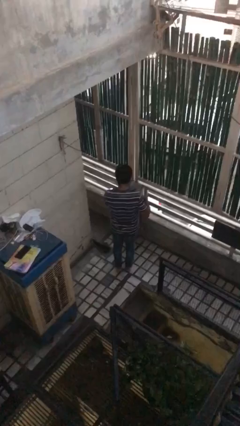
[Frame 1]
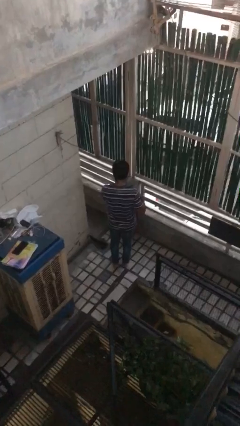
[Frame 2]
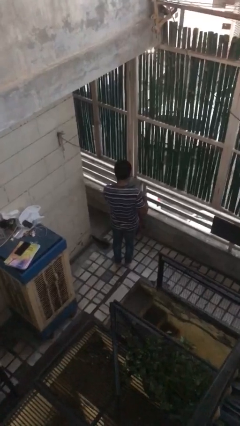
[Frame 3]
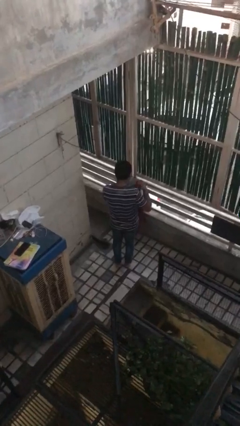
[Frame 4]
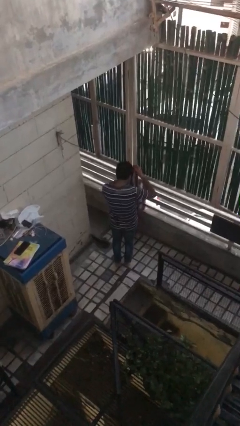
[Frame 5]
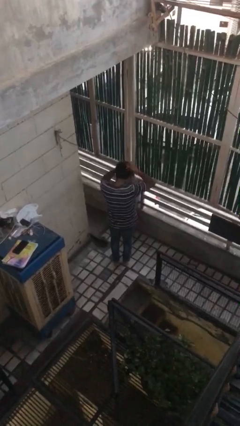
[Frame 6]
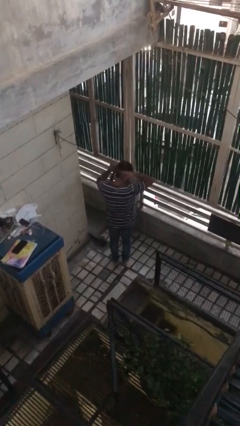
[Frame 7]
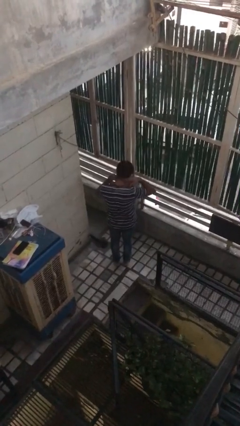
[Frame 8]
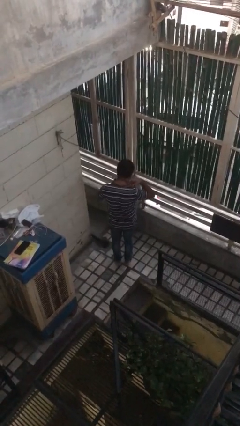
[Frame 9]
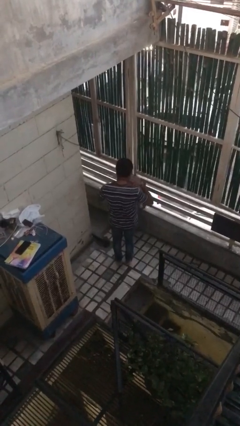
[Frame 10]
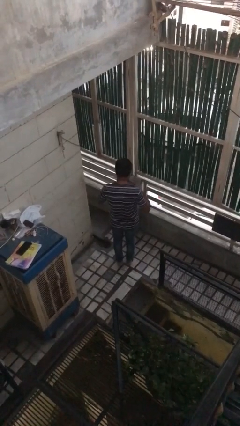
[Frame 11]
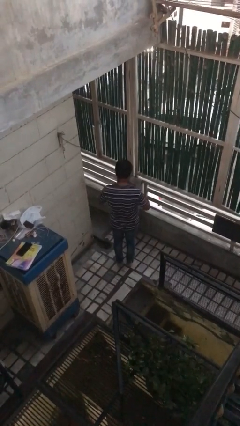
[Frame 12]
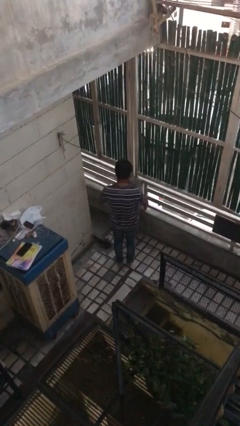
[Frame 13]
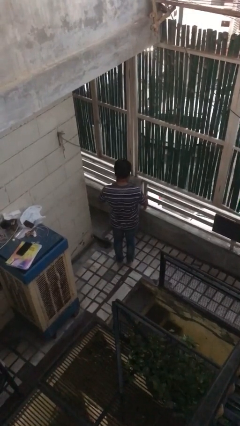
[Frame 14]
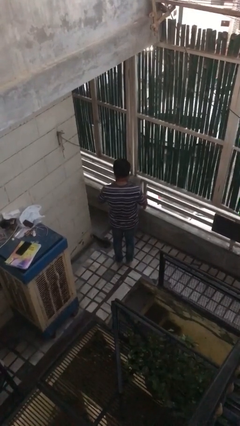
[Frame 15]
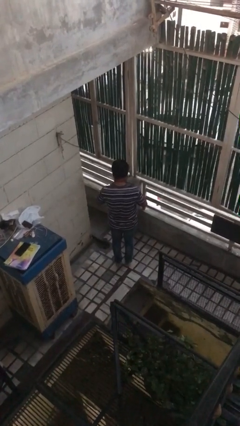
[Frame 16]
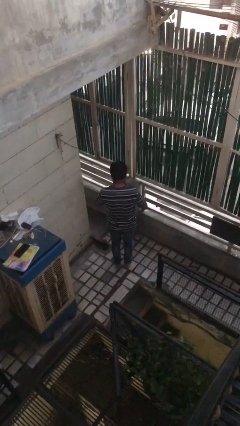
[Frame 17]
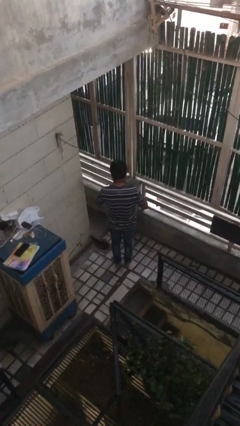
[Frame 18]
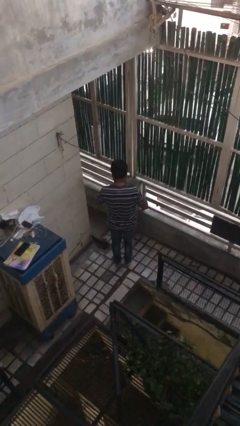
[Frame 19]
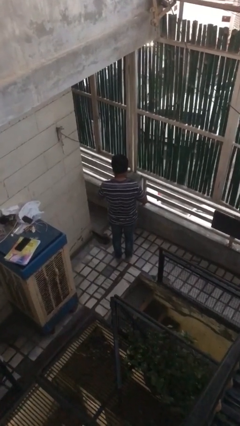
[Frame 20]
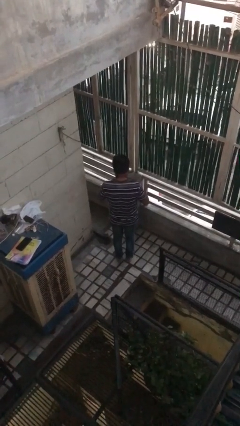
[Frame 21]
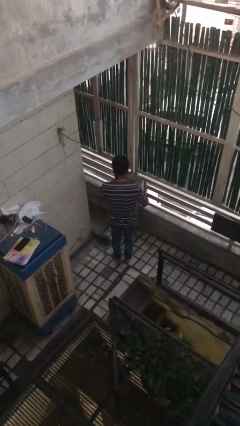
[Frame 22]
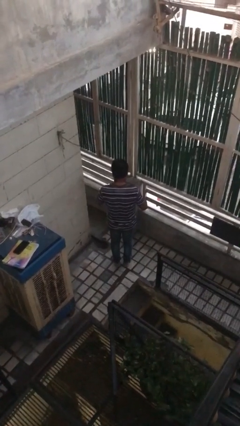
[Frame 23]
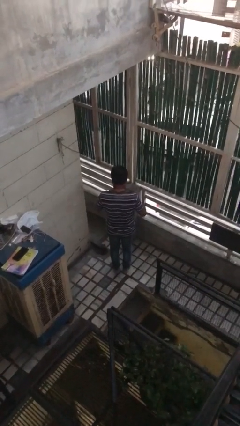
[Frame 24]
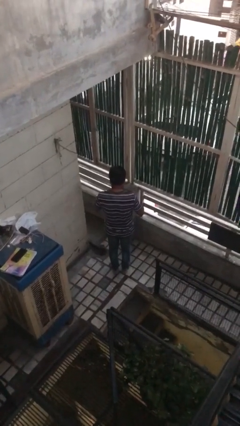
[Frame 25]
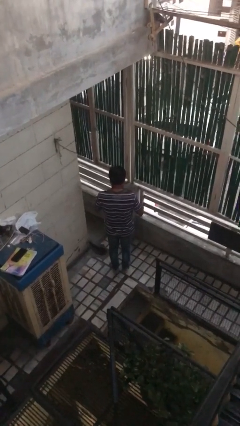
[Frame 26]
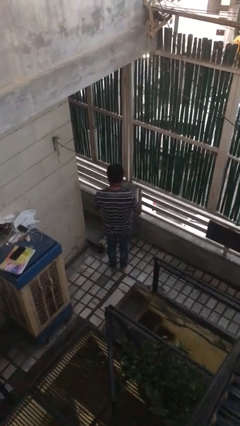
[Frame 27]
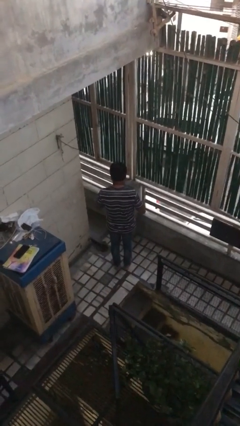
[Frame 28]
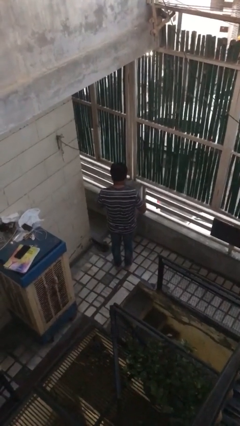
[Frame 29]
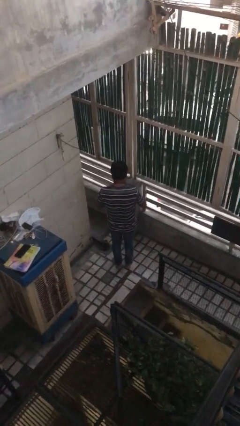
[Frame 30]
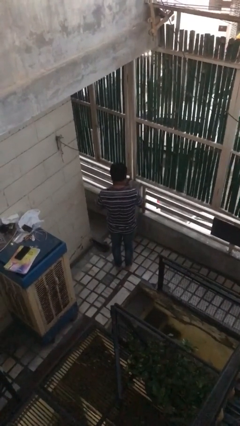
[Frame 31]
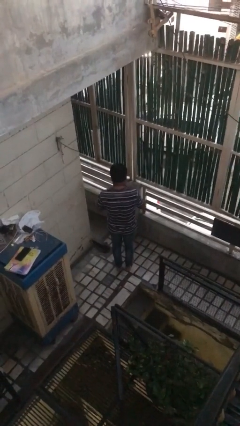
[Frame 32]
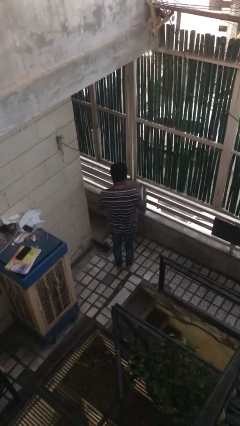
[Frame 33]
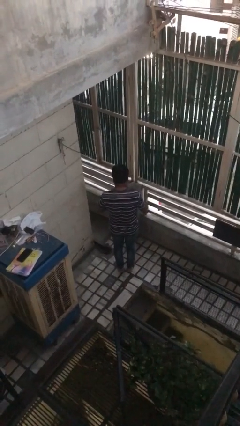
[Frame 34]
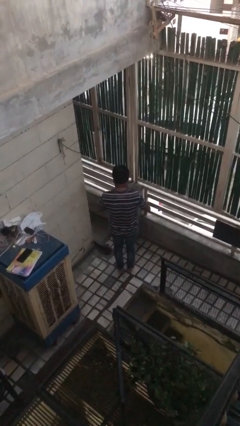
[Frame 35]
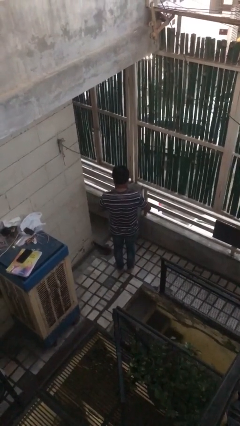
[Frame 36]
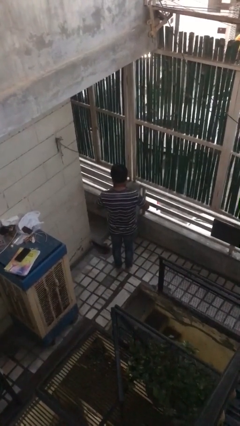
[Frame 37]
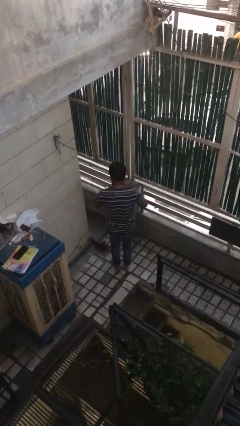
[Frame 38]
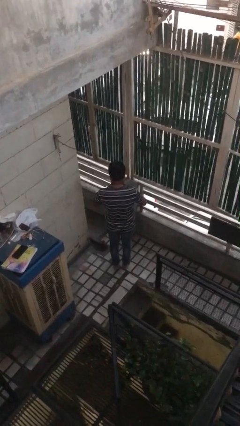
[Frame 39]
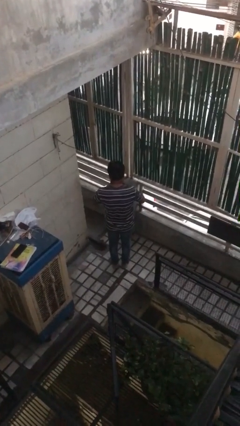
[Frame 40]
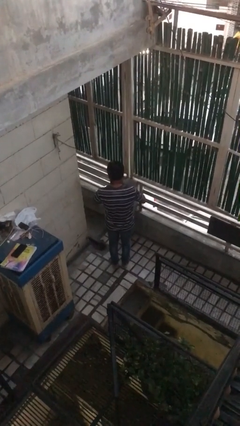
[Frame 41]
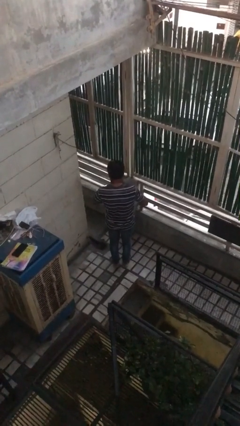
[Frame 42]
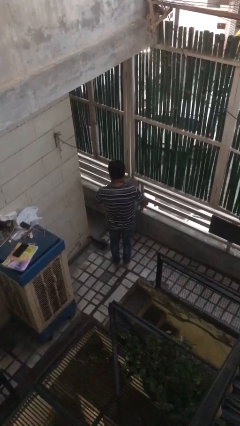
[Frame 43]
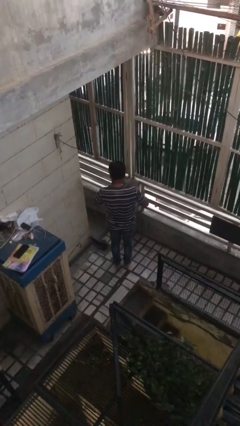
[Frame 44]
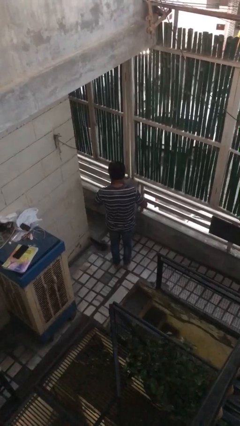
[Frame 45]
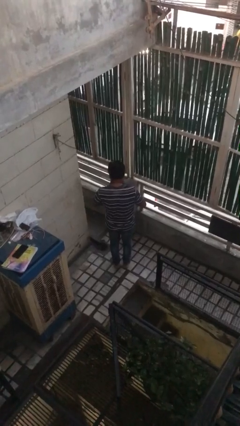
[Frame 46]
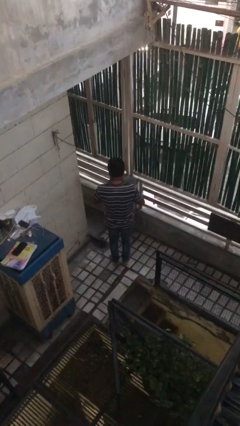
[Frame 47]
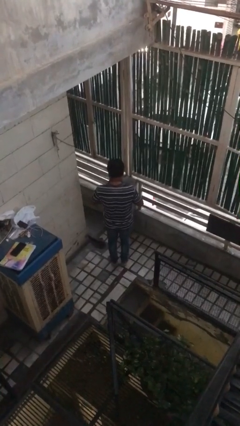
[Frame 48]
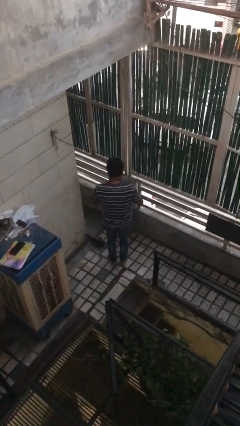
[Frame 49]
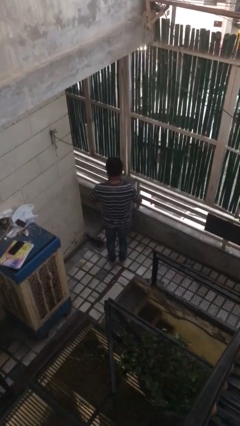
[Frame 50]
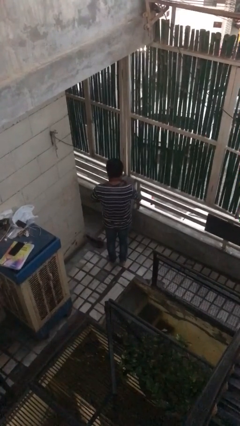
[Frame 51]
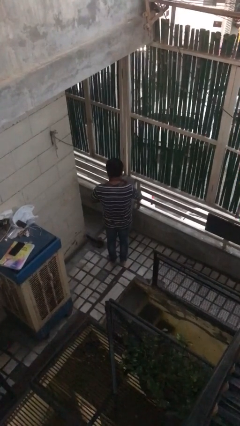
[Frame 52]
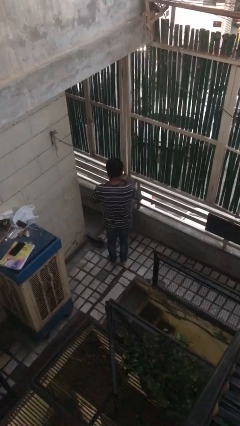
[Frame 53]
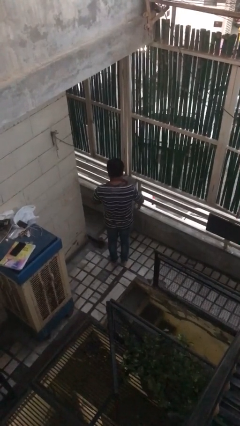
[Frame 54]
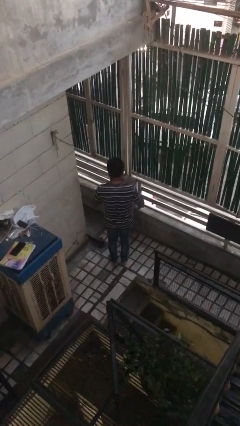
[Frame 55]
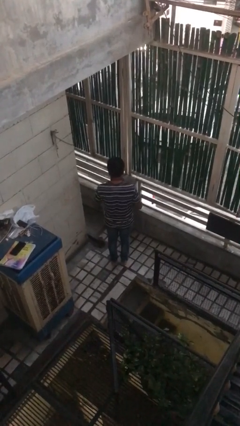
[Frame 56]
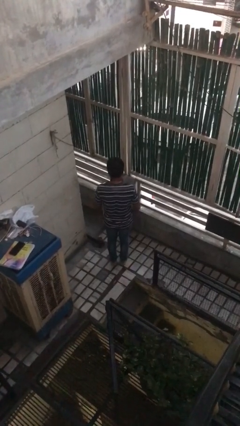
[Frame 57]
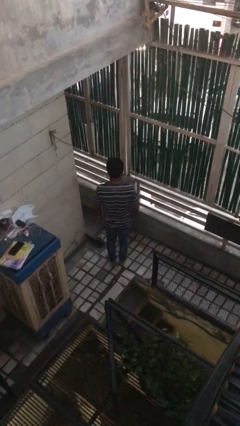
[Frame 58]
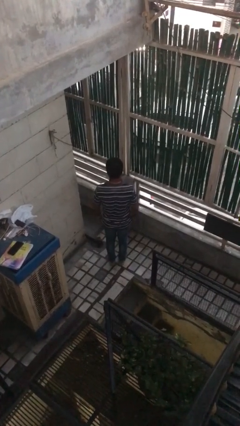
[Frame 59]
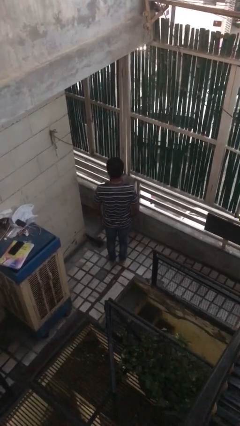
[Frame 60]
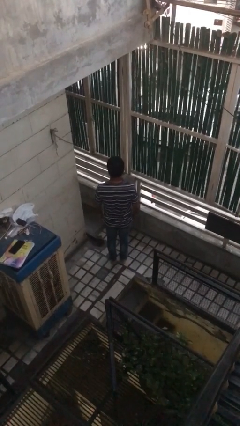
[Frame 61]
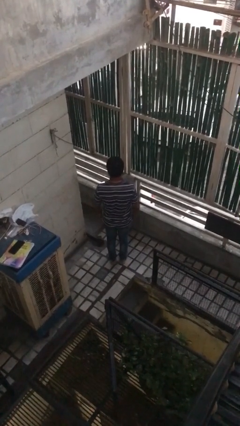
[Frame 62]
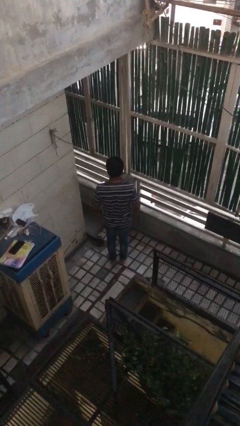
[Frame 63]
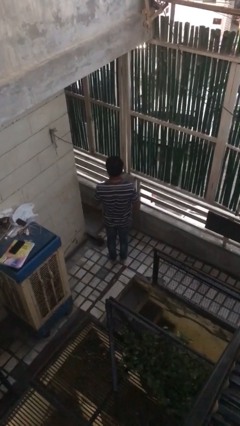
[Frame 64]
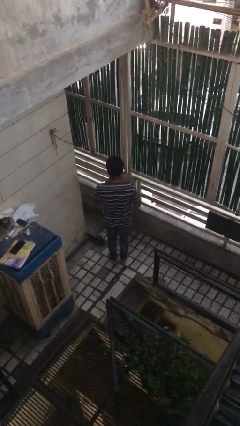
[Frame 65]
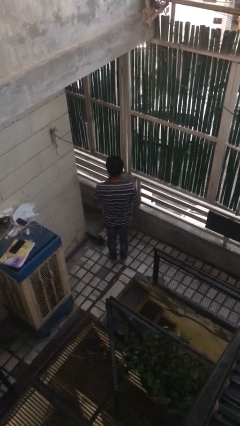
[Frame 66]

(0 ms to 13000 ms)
person puts on necktie

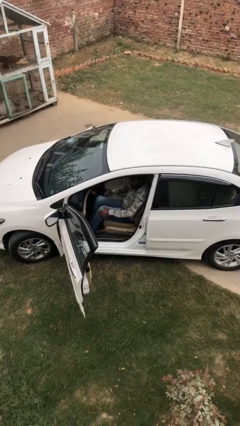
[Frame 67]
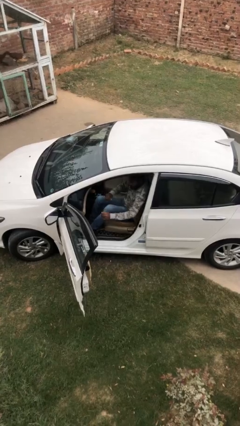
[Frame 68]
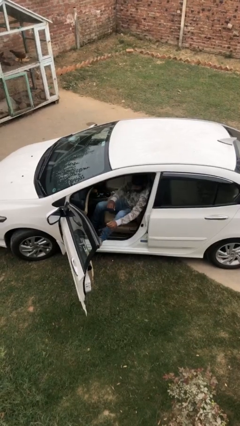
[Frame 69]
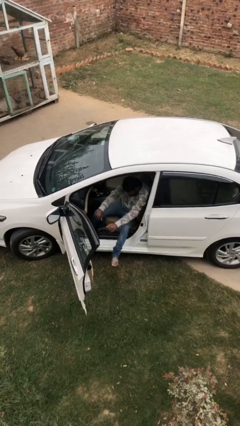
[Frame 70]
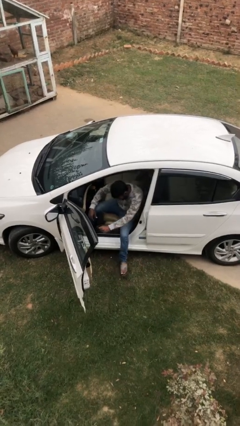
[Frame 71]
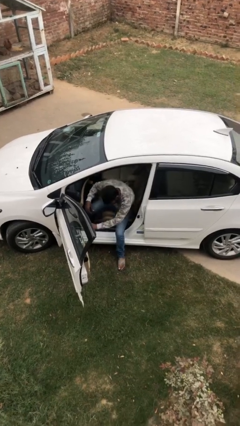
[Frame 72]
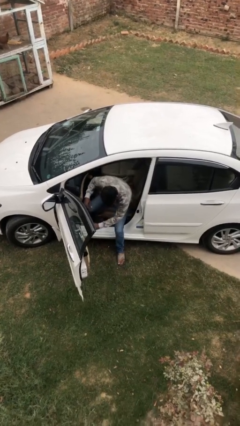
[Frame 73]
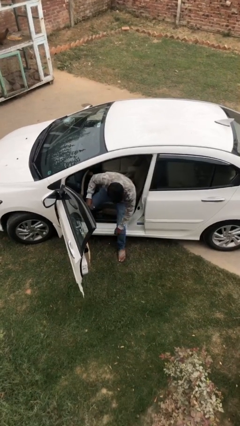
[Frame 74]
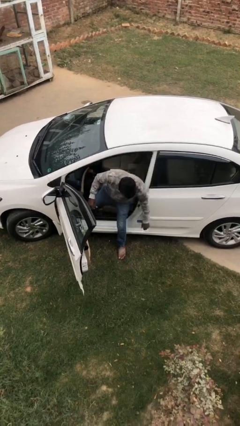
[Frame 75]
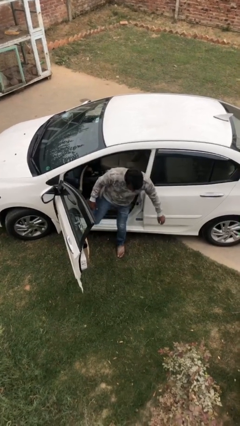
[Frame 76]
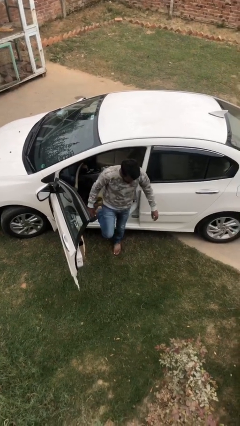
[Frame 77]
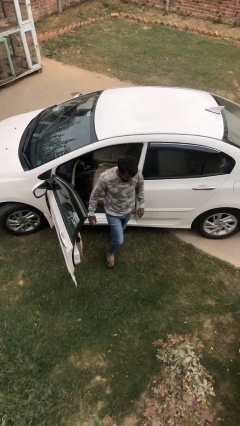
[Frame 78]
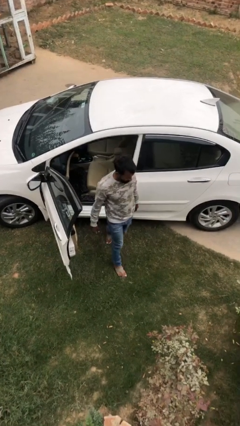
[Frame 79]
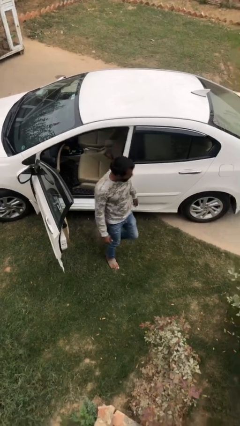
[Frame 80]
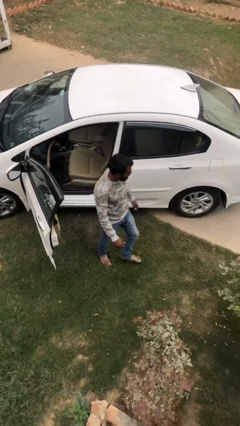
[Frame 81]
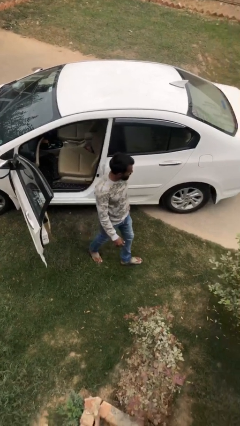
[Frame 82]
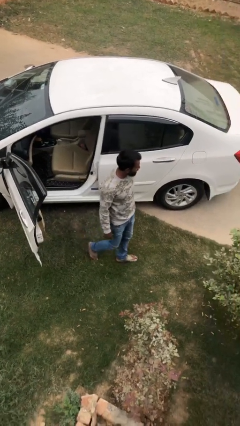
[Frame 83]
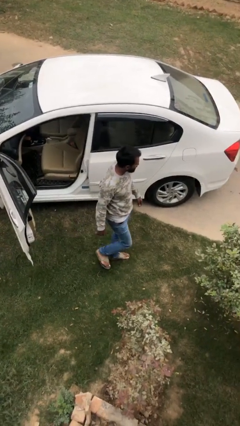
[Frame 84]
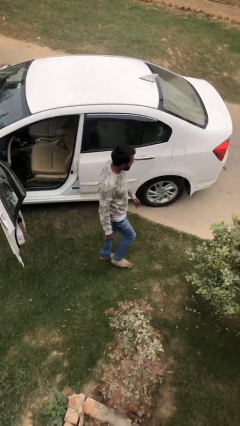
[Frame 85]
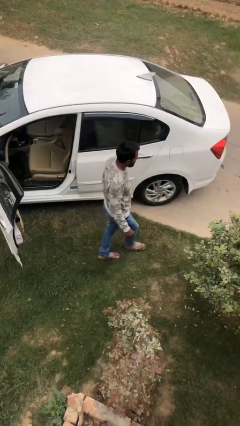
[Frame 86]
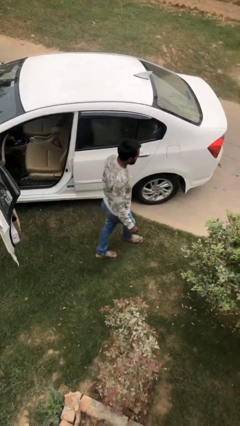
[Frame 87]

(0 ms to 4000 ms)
person exits car

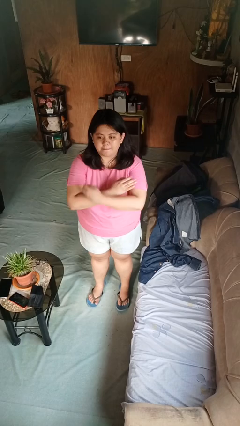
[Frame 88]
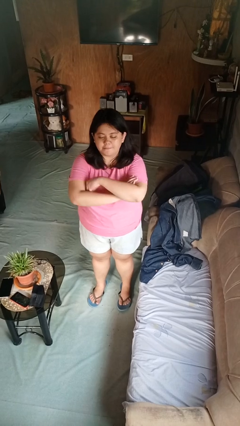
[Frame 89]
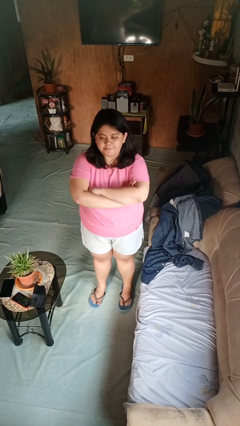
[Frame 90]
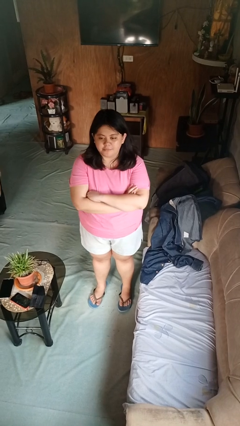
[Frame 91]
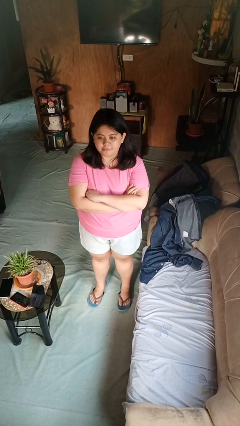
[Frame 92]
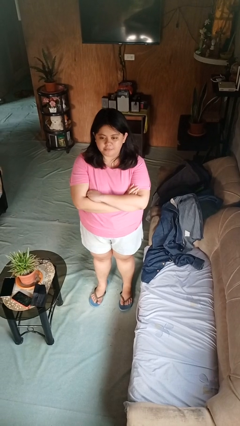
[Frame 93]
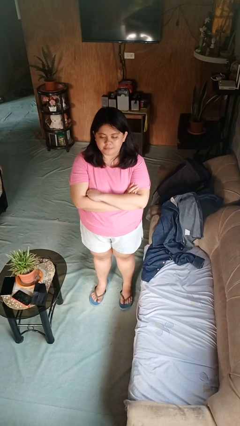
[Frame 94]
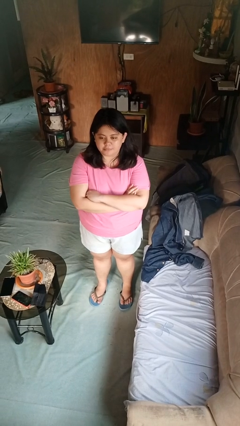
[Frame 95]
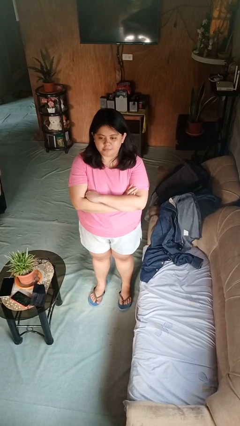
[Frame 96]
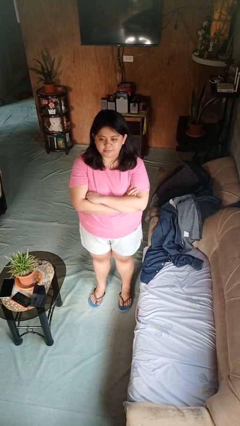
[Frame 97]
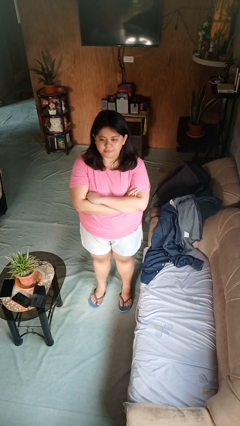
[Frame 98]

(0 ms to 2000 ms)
person crosses arms
